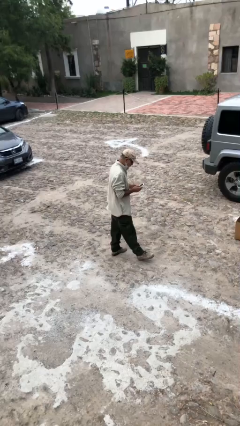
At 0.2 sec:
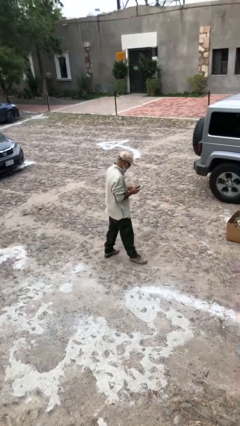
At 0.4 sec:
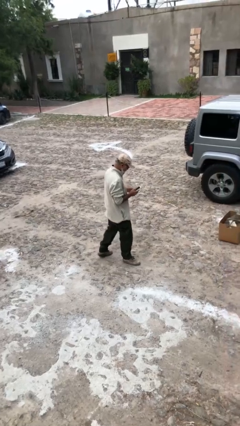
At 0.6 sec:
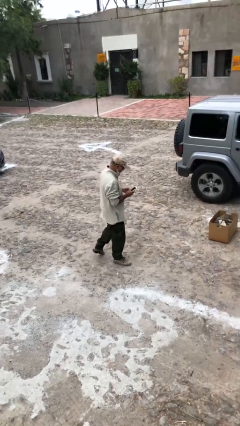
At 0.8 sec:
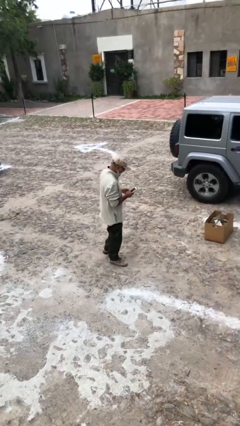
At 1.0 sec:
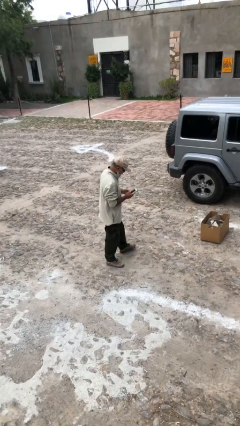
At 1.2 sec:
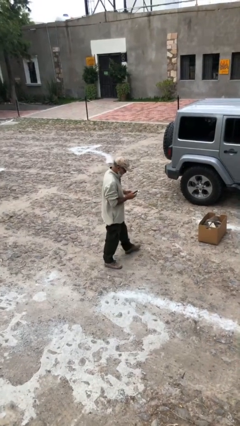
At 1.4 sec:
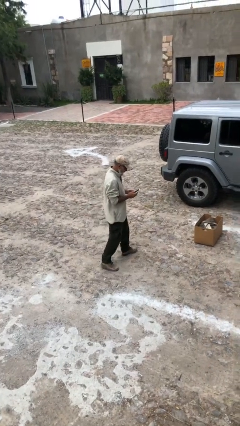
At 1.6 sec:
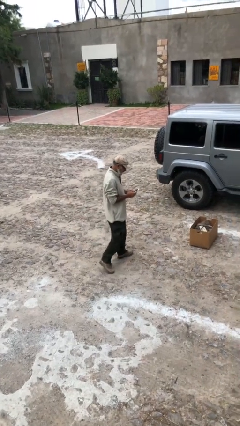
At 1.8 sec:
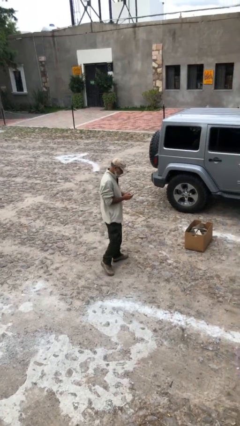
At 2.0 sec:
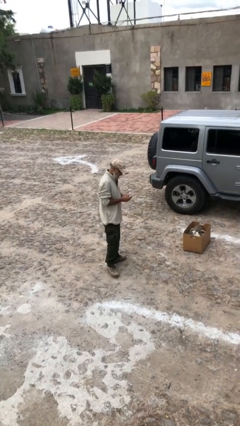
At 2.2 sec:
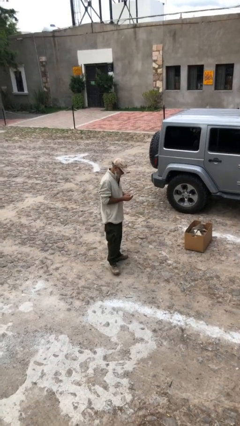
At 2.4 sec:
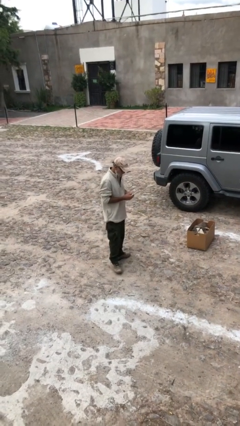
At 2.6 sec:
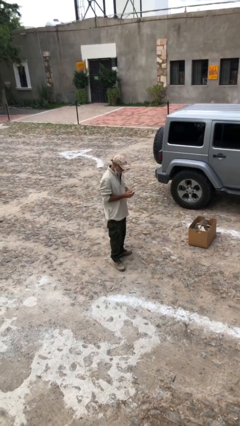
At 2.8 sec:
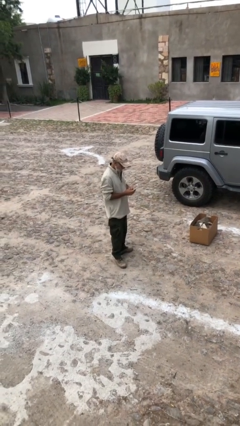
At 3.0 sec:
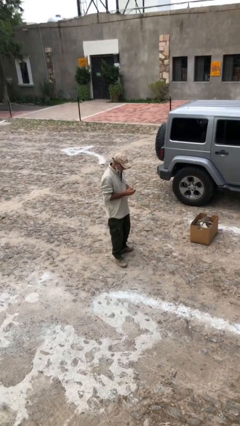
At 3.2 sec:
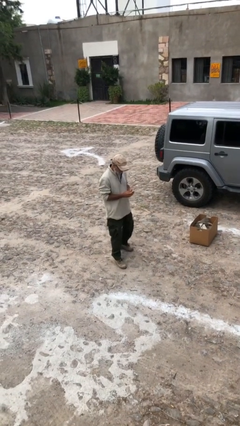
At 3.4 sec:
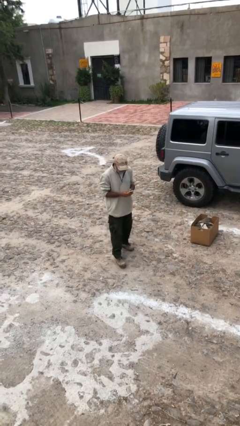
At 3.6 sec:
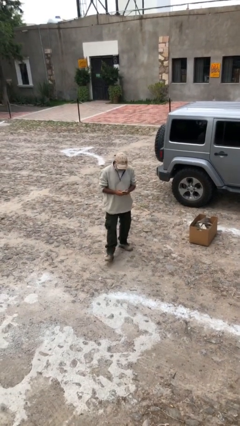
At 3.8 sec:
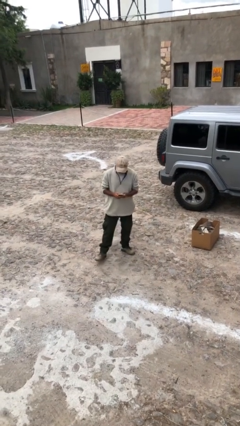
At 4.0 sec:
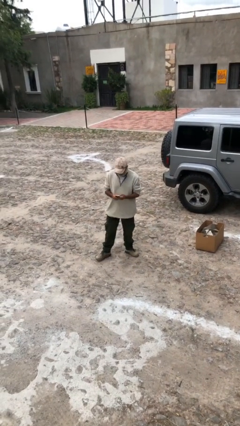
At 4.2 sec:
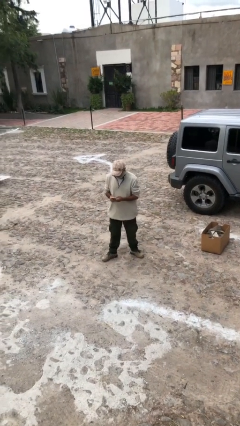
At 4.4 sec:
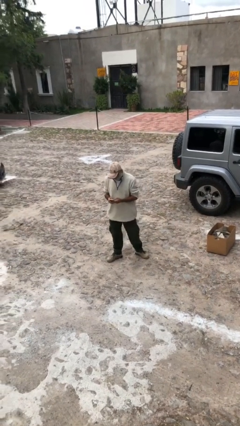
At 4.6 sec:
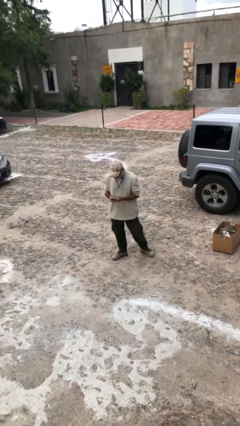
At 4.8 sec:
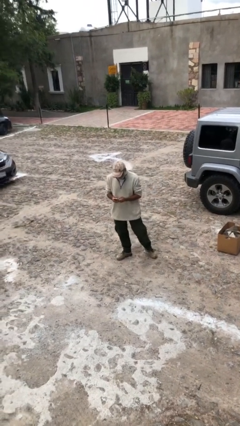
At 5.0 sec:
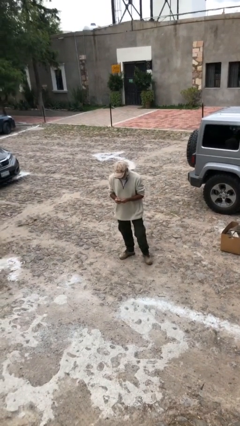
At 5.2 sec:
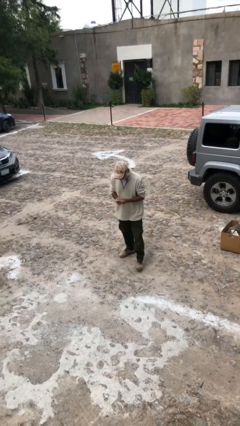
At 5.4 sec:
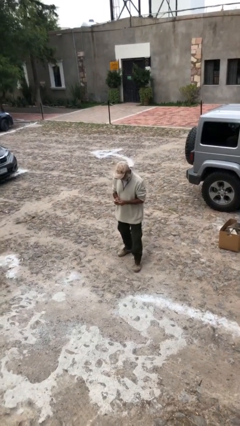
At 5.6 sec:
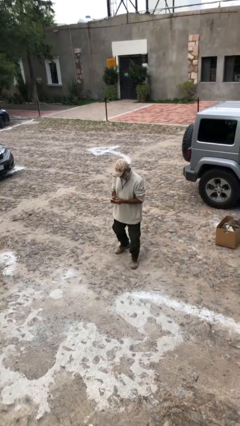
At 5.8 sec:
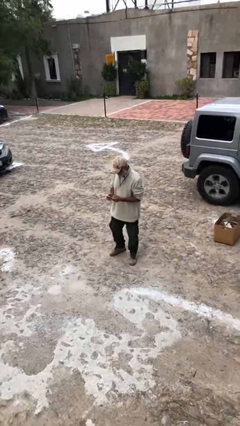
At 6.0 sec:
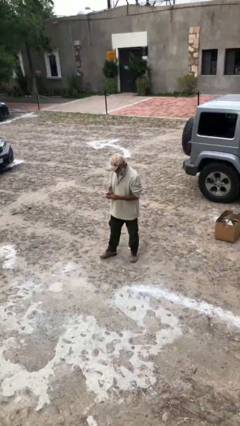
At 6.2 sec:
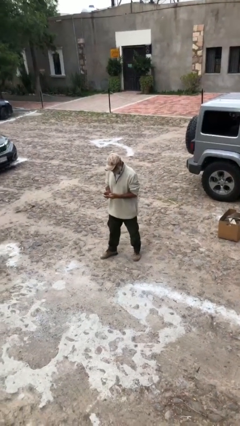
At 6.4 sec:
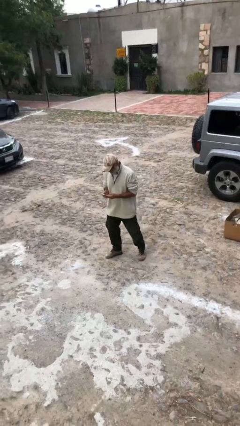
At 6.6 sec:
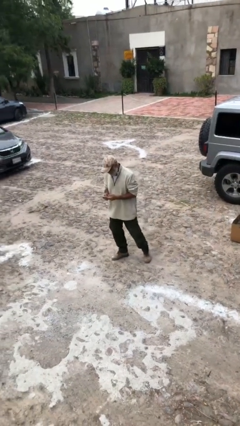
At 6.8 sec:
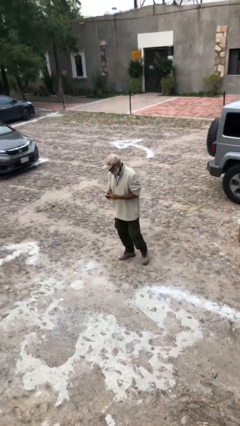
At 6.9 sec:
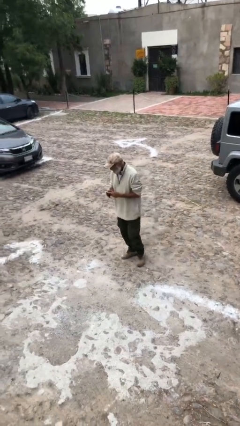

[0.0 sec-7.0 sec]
person texts on phone

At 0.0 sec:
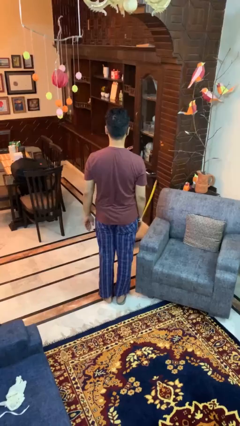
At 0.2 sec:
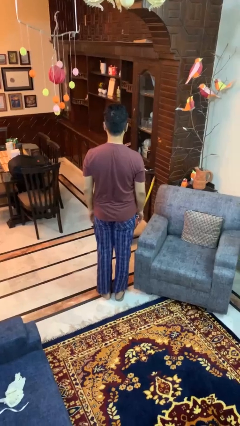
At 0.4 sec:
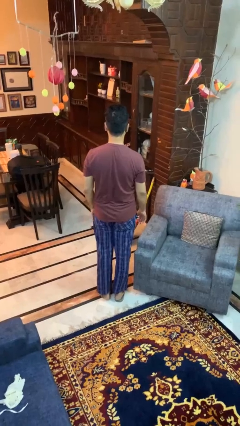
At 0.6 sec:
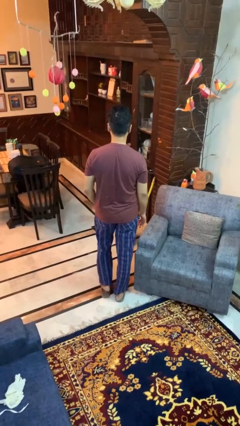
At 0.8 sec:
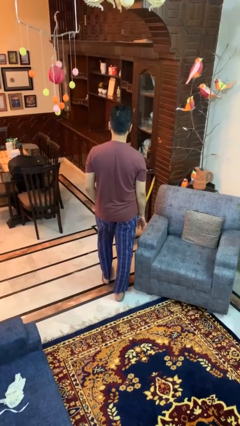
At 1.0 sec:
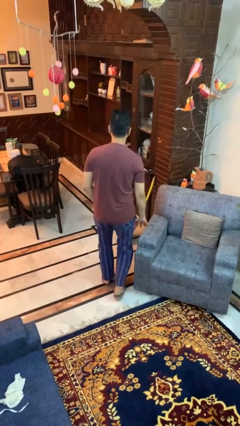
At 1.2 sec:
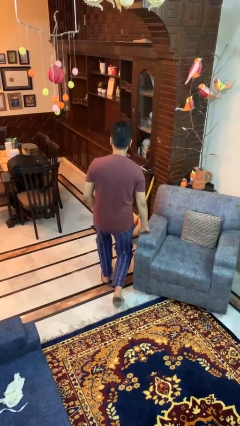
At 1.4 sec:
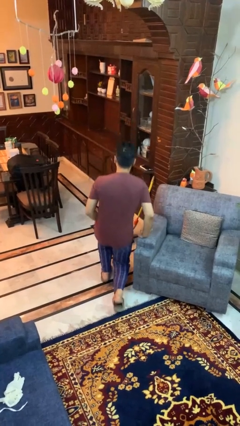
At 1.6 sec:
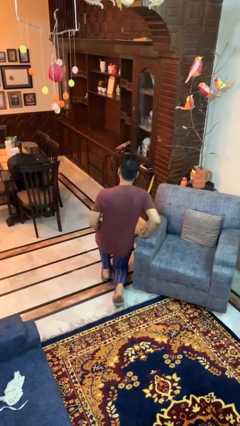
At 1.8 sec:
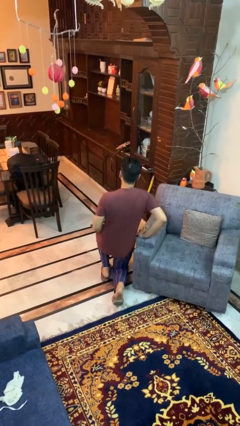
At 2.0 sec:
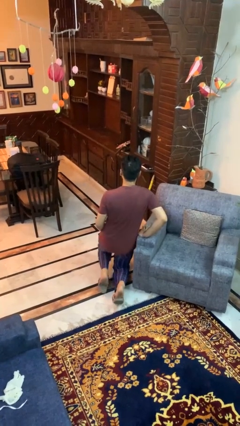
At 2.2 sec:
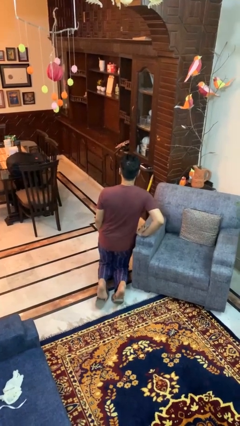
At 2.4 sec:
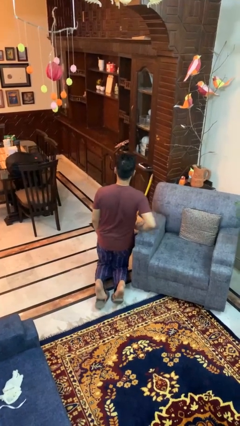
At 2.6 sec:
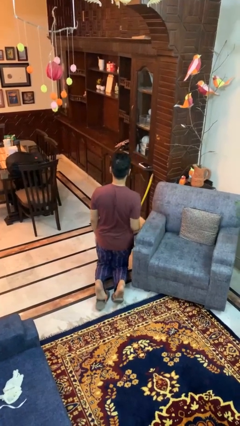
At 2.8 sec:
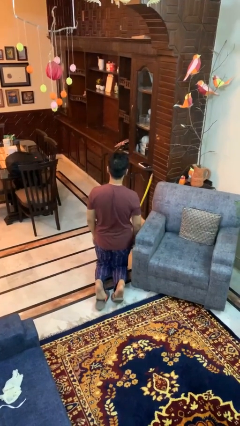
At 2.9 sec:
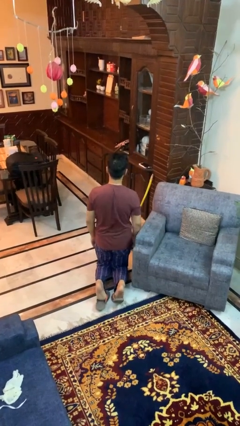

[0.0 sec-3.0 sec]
person kneels

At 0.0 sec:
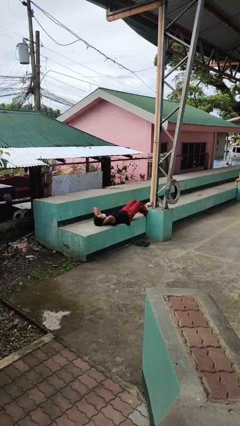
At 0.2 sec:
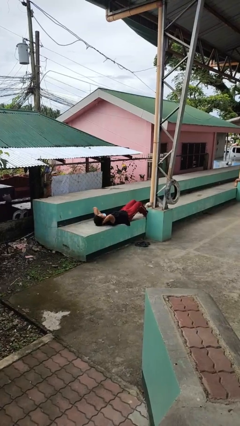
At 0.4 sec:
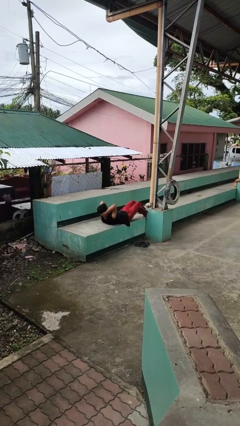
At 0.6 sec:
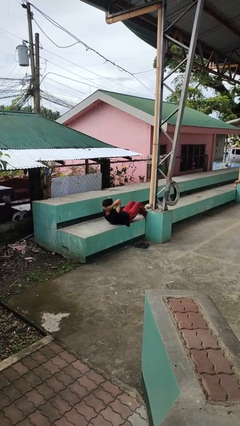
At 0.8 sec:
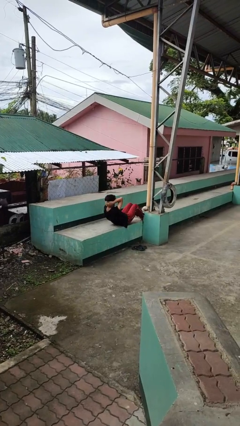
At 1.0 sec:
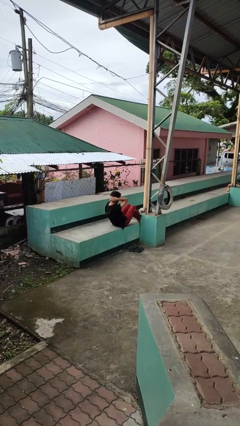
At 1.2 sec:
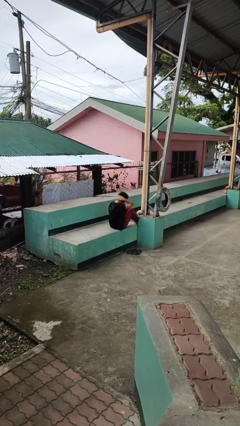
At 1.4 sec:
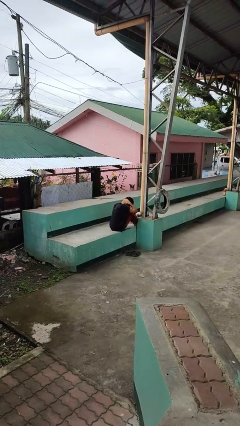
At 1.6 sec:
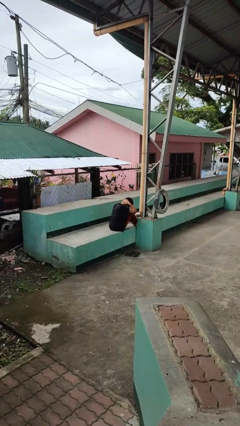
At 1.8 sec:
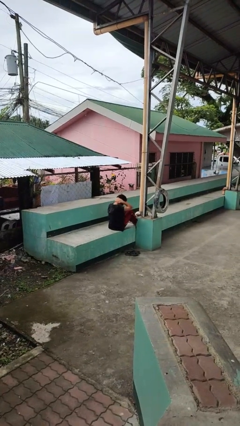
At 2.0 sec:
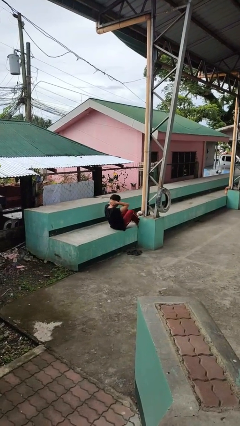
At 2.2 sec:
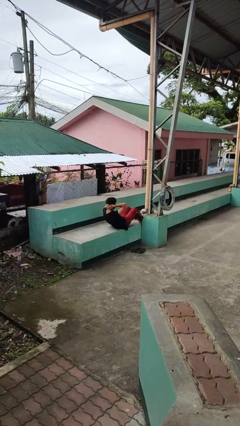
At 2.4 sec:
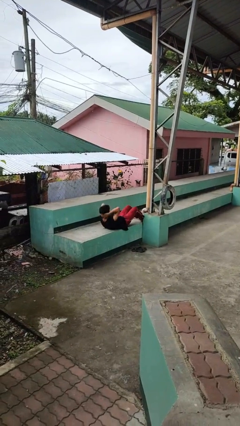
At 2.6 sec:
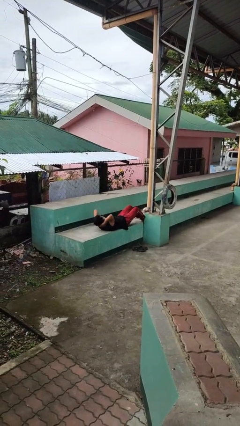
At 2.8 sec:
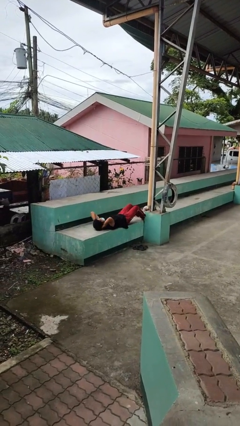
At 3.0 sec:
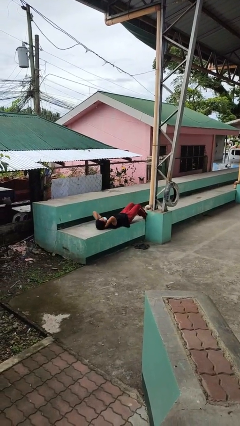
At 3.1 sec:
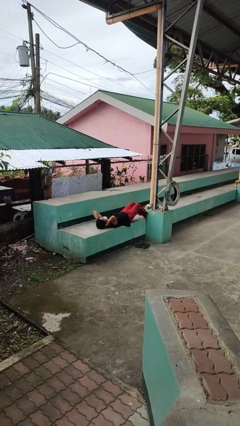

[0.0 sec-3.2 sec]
person exercises with situp

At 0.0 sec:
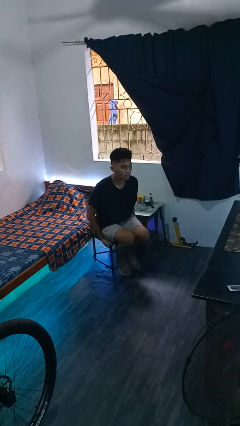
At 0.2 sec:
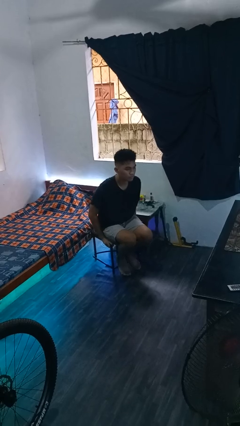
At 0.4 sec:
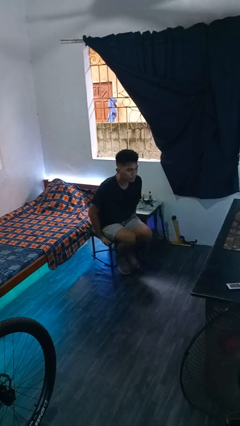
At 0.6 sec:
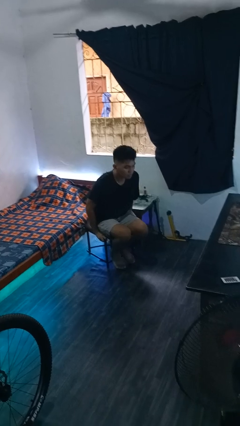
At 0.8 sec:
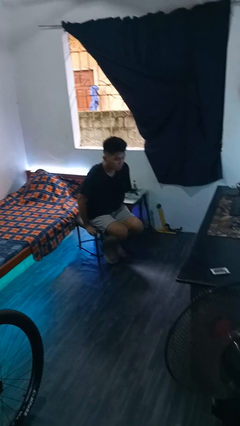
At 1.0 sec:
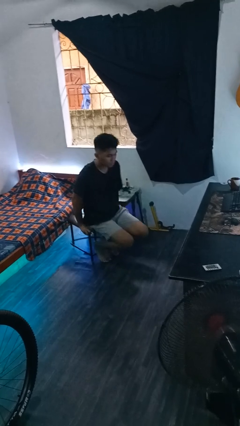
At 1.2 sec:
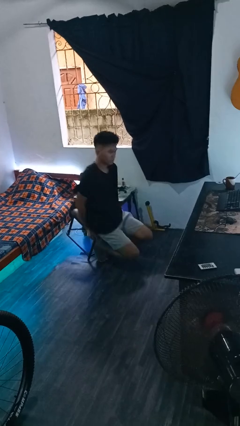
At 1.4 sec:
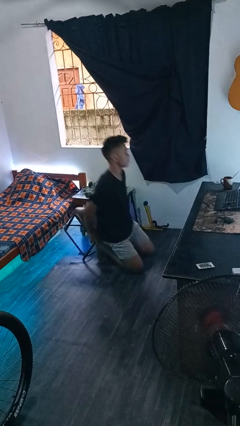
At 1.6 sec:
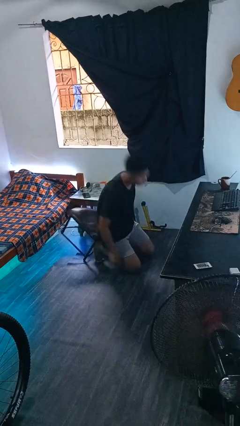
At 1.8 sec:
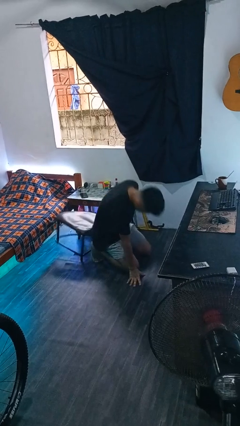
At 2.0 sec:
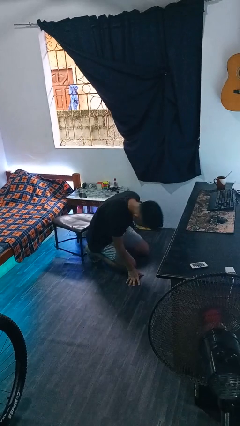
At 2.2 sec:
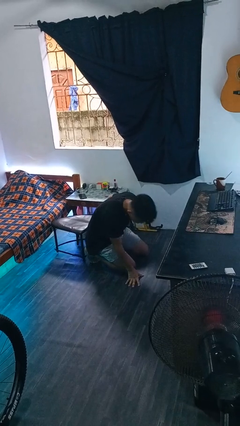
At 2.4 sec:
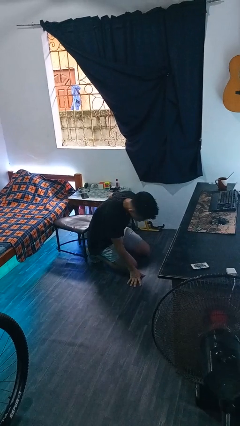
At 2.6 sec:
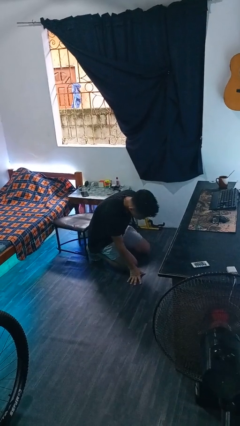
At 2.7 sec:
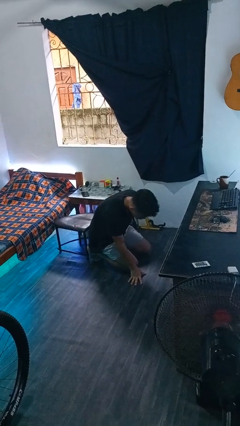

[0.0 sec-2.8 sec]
person falls from chair

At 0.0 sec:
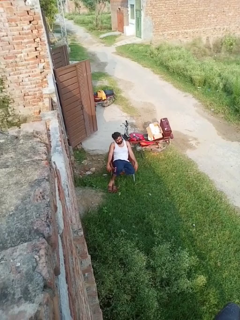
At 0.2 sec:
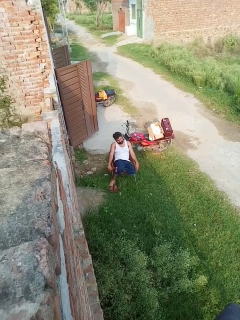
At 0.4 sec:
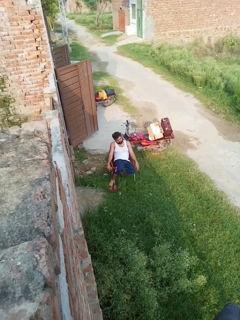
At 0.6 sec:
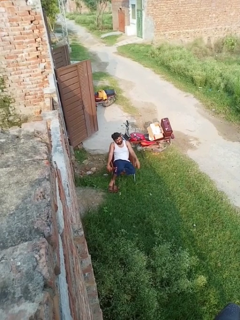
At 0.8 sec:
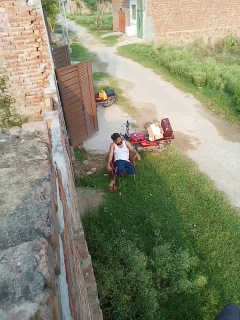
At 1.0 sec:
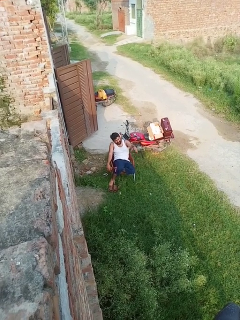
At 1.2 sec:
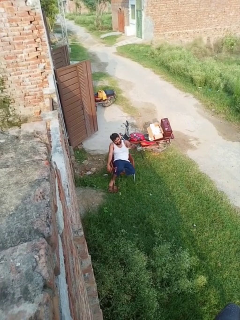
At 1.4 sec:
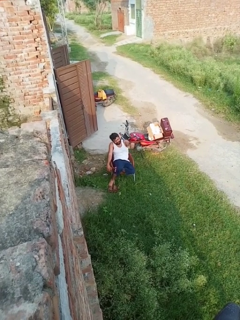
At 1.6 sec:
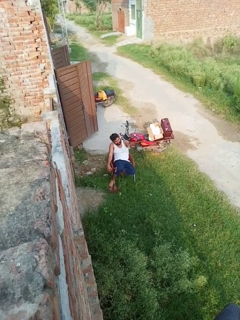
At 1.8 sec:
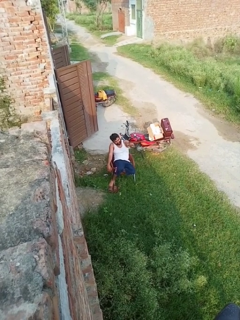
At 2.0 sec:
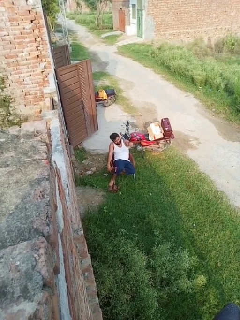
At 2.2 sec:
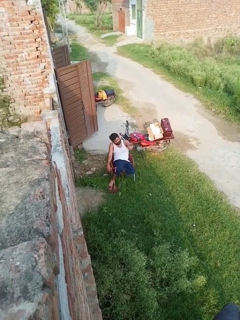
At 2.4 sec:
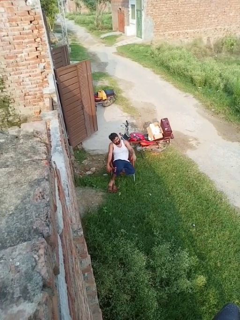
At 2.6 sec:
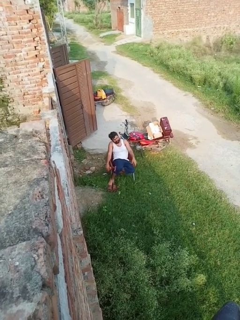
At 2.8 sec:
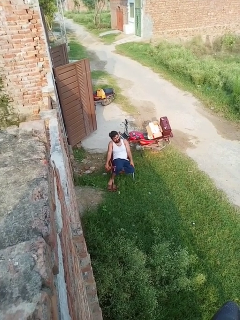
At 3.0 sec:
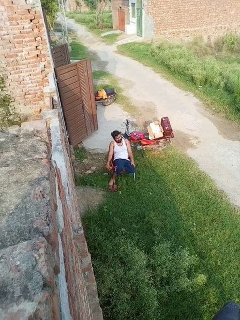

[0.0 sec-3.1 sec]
person gestures come here
